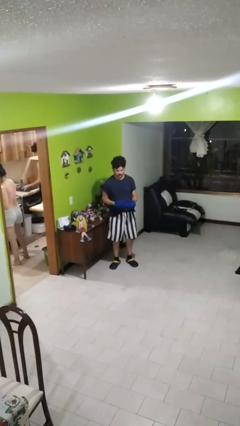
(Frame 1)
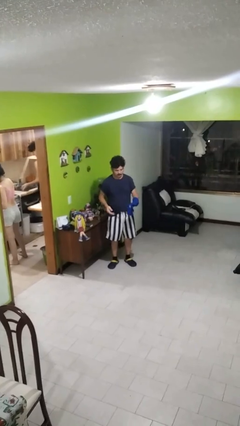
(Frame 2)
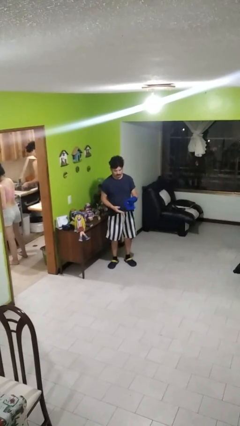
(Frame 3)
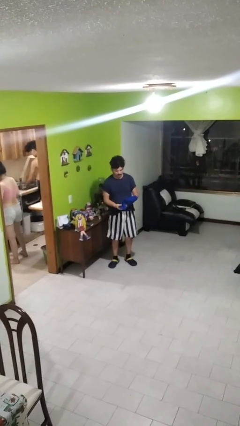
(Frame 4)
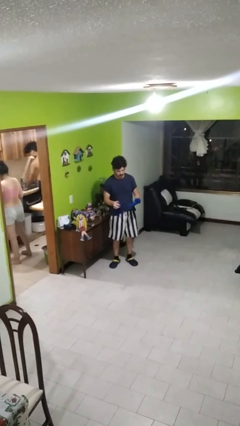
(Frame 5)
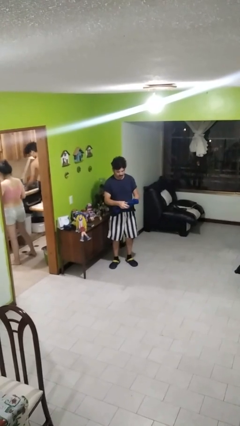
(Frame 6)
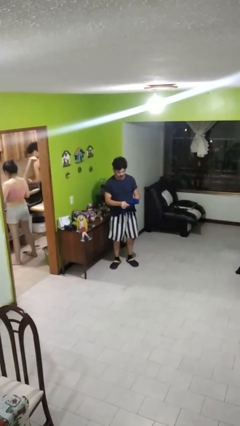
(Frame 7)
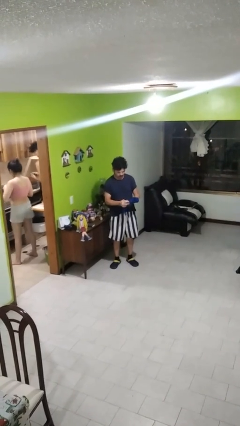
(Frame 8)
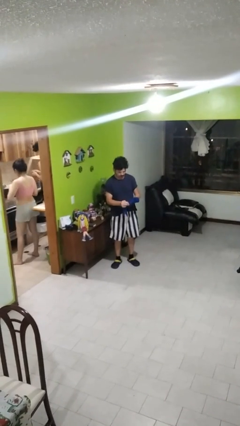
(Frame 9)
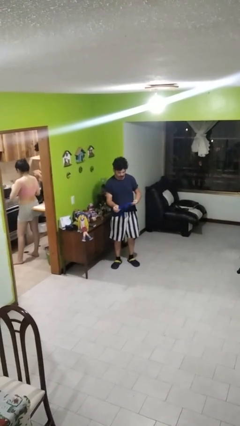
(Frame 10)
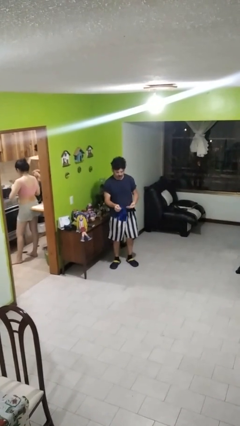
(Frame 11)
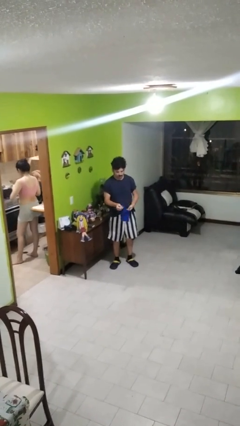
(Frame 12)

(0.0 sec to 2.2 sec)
person takes off gloves

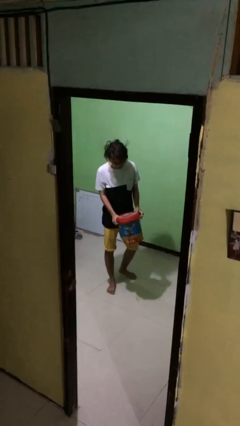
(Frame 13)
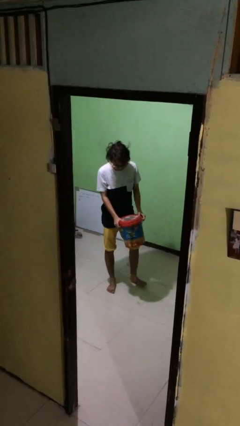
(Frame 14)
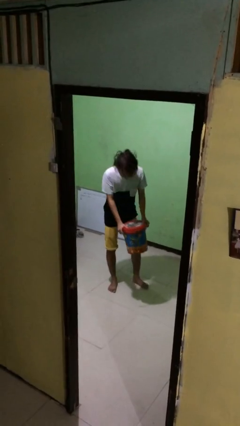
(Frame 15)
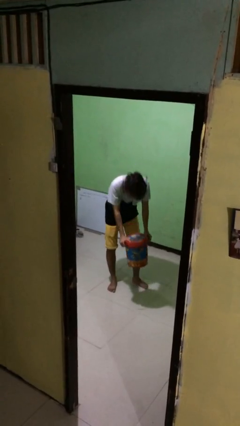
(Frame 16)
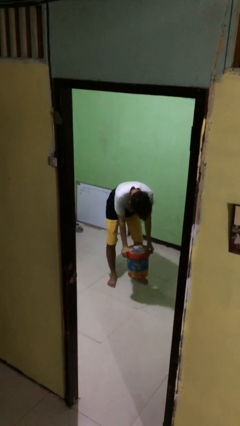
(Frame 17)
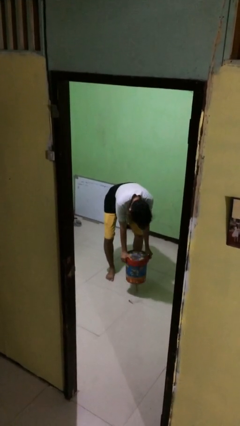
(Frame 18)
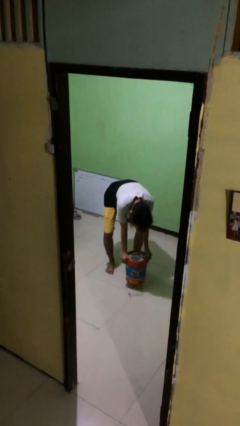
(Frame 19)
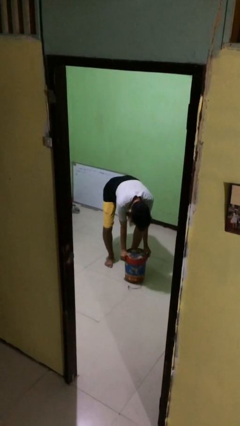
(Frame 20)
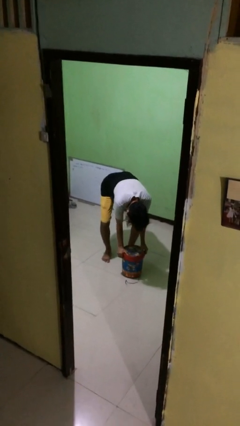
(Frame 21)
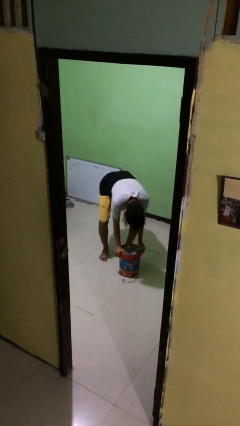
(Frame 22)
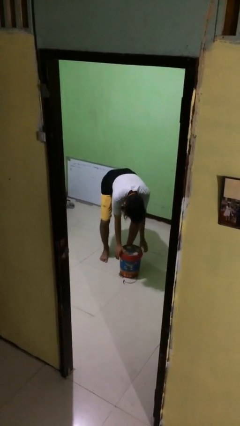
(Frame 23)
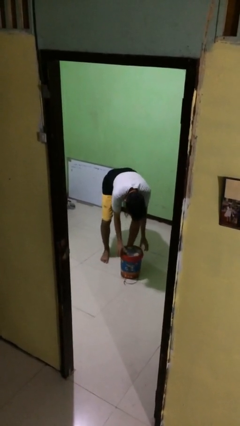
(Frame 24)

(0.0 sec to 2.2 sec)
person puts down object on floor

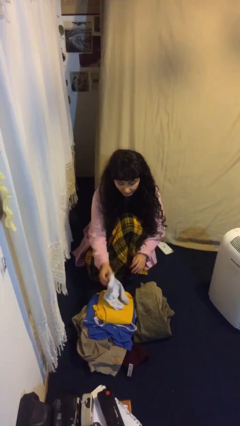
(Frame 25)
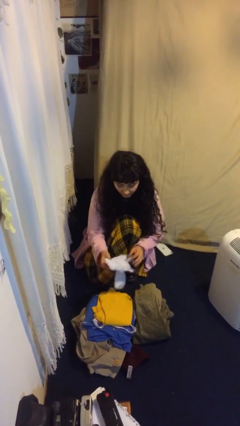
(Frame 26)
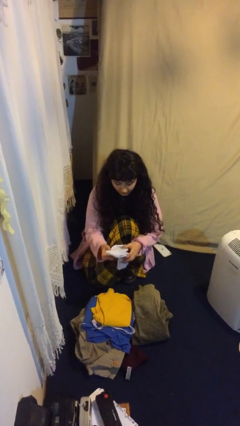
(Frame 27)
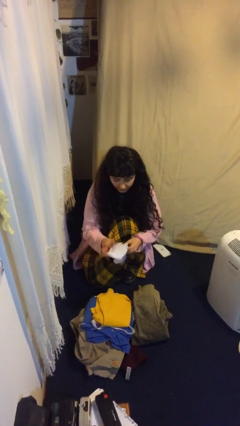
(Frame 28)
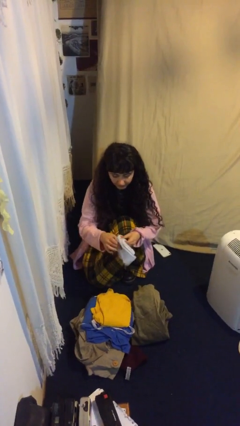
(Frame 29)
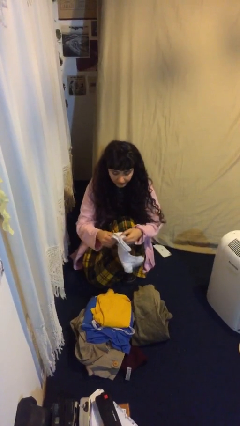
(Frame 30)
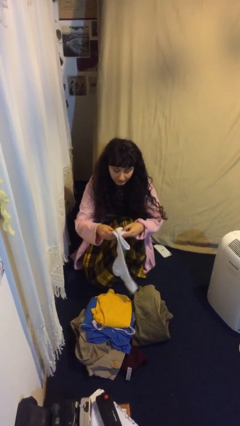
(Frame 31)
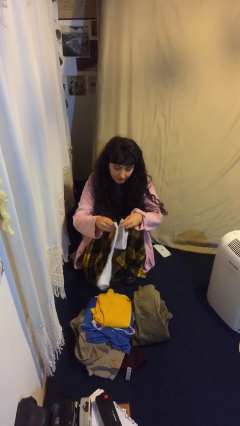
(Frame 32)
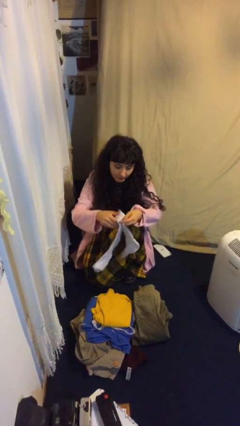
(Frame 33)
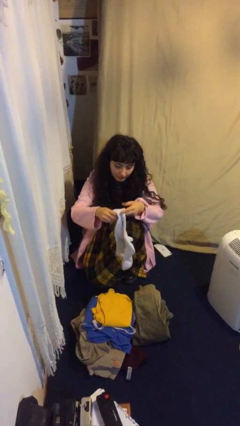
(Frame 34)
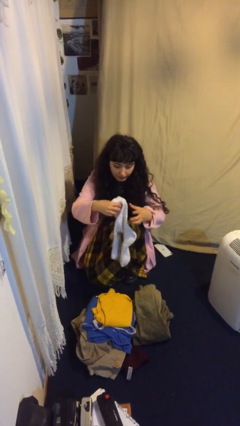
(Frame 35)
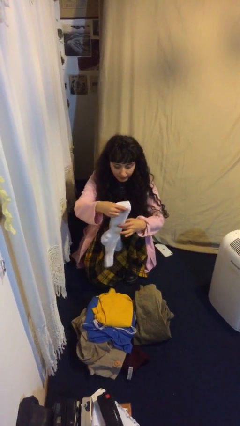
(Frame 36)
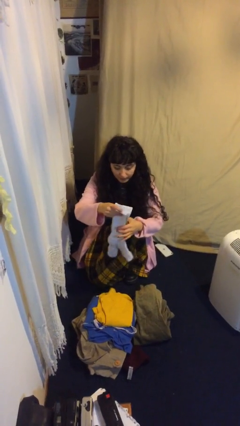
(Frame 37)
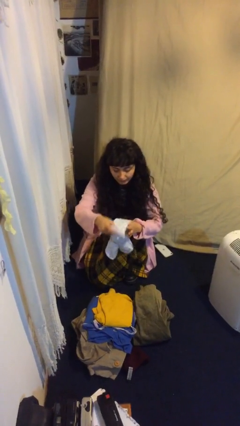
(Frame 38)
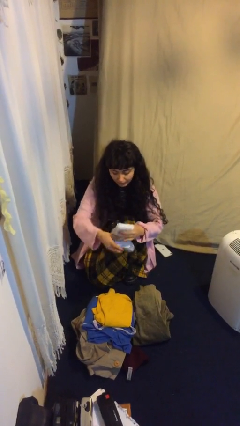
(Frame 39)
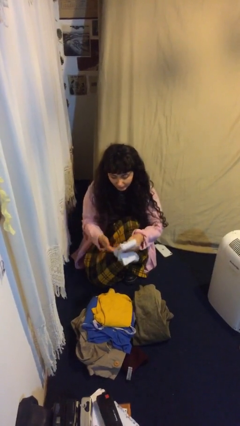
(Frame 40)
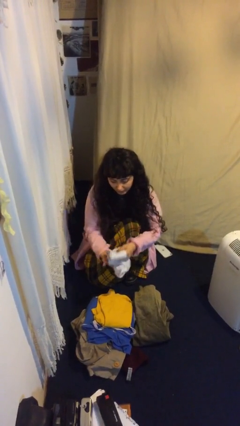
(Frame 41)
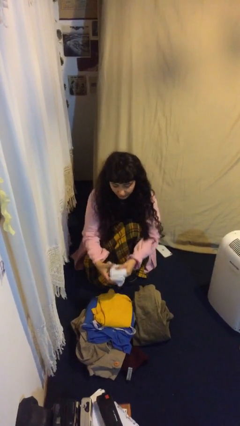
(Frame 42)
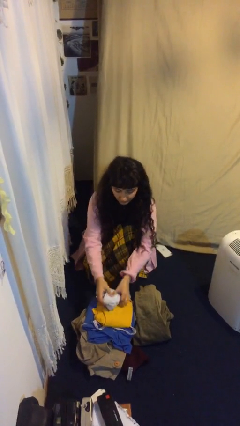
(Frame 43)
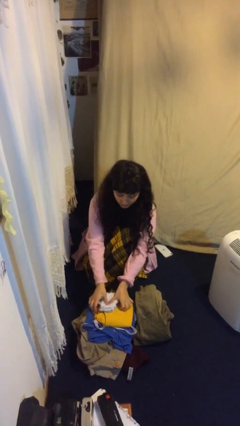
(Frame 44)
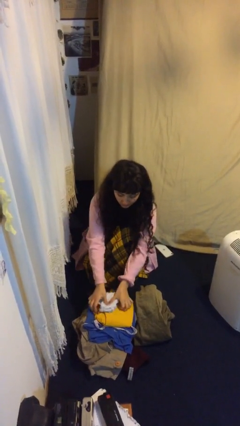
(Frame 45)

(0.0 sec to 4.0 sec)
person folds socks

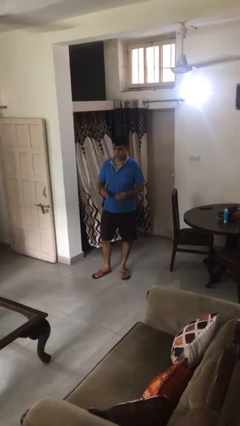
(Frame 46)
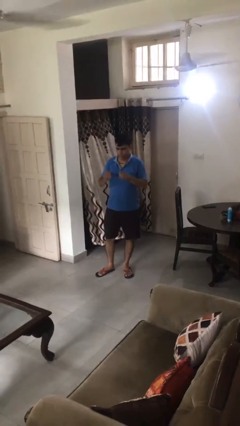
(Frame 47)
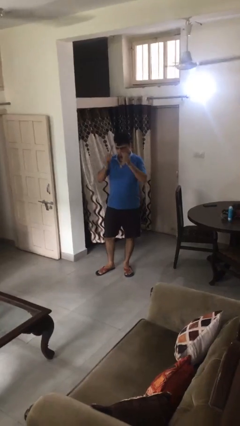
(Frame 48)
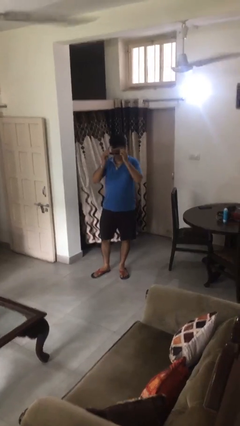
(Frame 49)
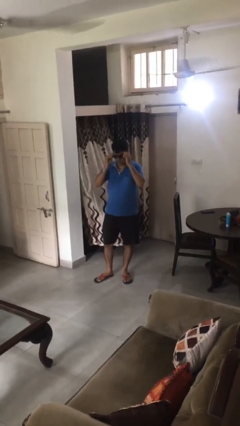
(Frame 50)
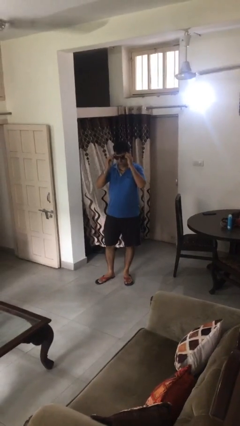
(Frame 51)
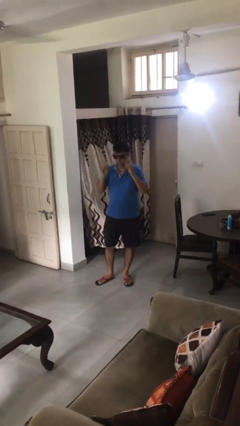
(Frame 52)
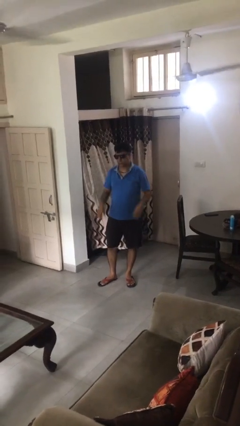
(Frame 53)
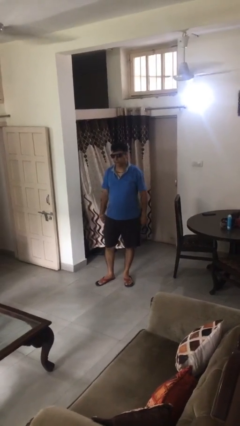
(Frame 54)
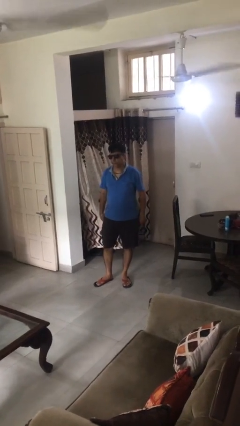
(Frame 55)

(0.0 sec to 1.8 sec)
person puts on sunglasses

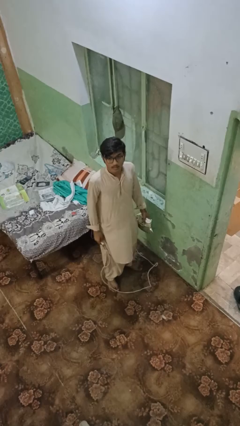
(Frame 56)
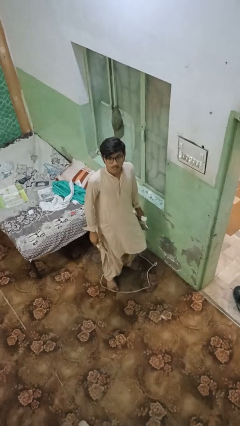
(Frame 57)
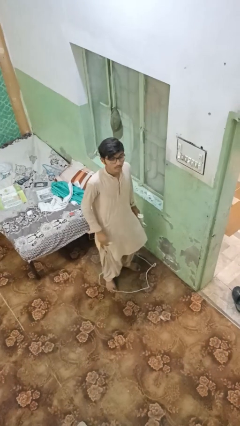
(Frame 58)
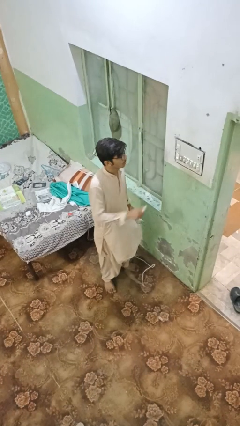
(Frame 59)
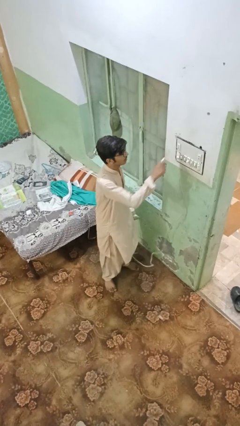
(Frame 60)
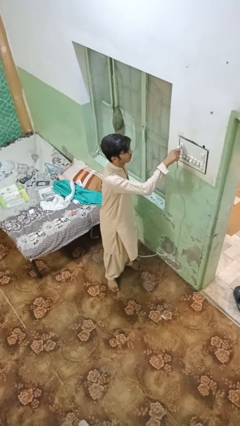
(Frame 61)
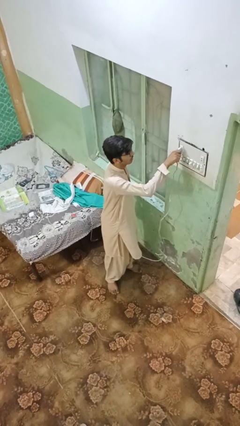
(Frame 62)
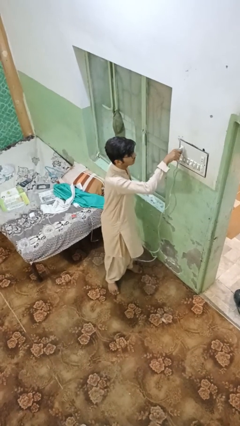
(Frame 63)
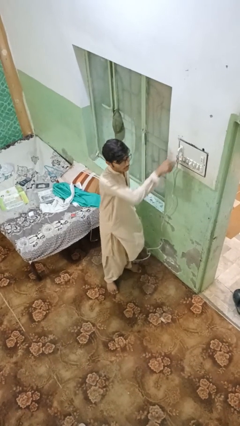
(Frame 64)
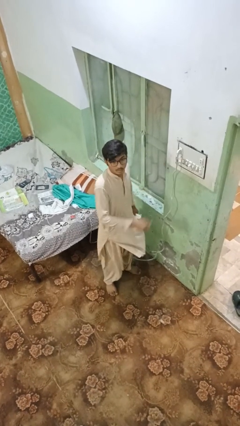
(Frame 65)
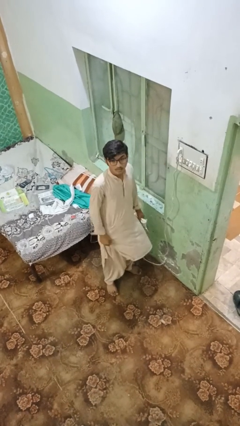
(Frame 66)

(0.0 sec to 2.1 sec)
person plugs into electrical socket

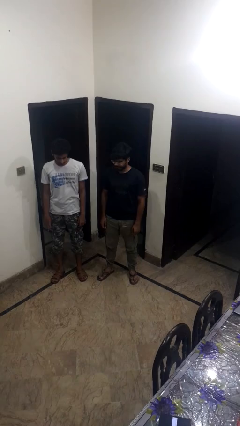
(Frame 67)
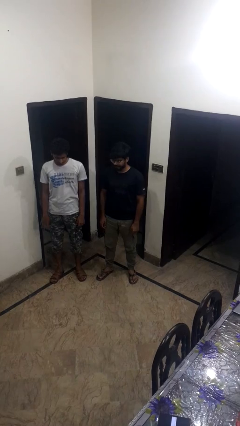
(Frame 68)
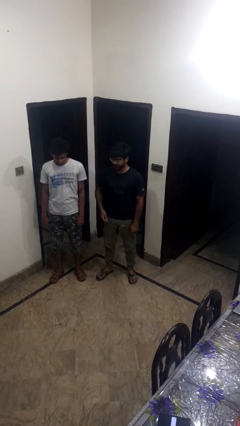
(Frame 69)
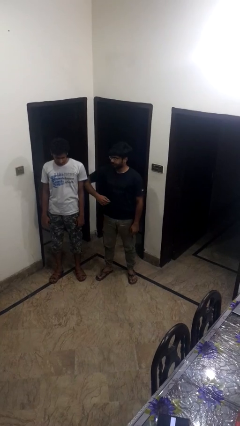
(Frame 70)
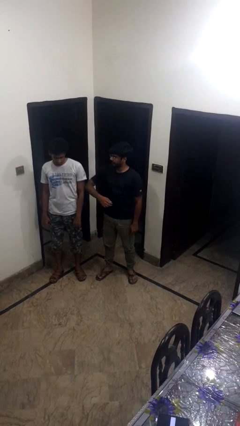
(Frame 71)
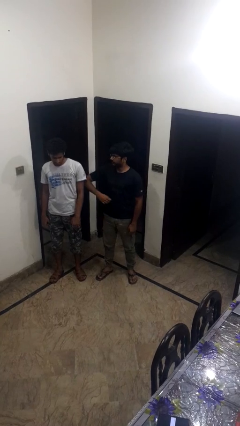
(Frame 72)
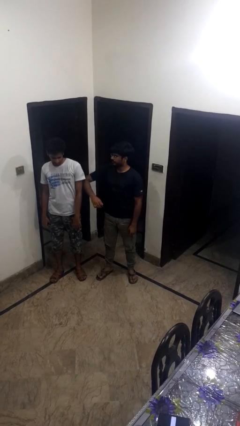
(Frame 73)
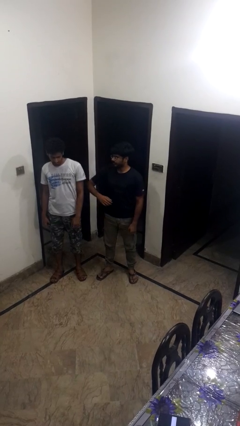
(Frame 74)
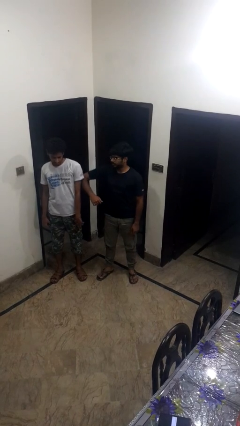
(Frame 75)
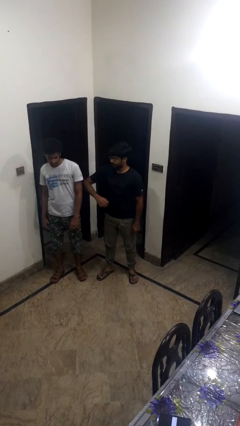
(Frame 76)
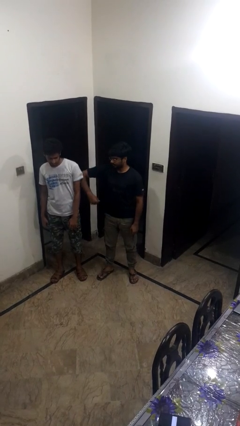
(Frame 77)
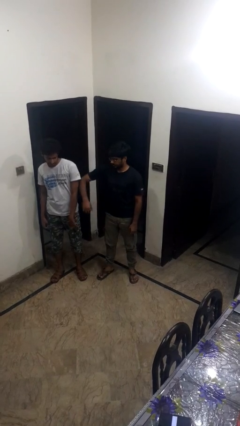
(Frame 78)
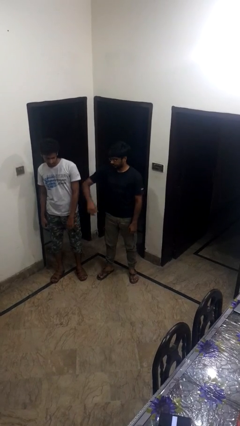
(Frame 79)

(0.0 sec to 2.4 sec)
person nudges person with elbow

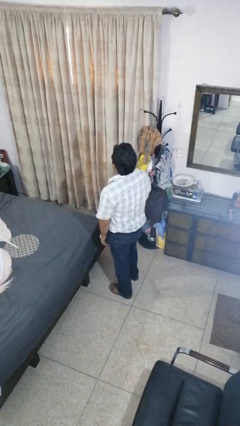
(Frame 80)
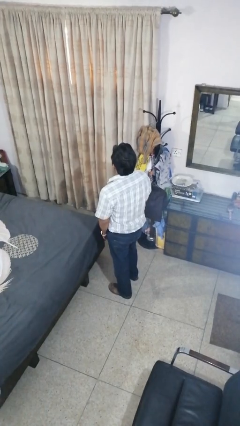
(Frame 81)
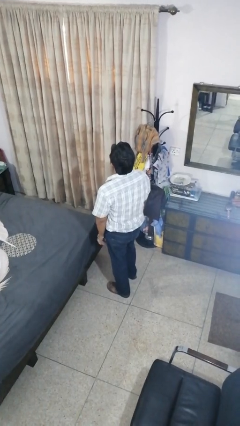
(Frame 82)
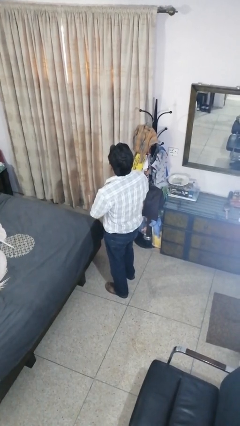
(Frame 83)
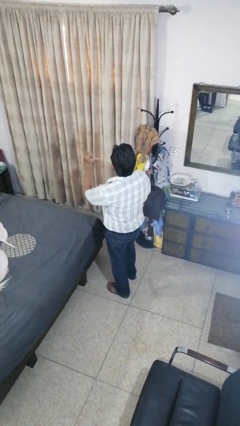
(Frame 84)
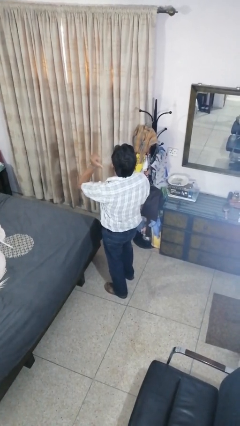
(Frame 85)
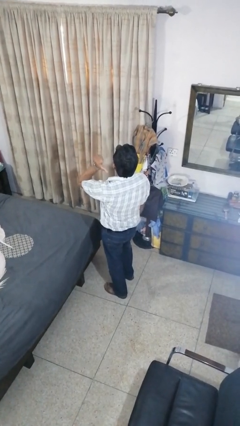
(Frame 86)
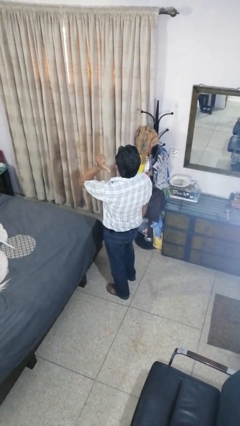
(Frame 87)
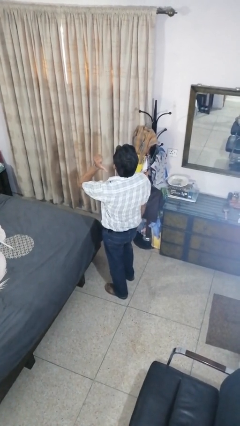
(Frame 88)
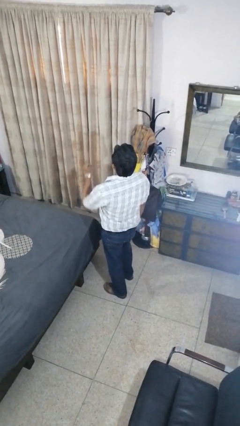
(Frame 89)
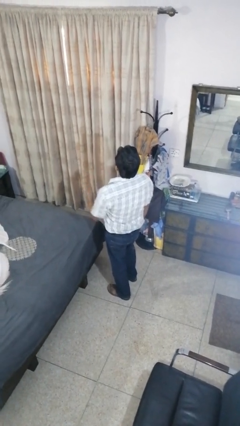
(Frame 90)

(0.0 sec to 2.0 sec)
person gestures behind me

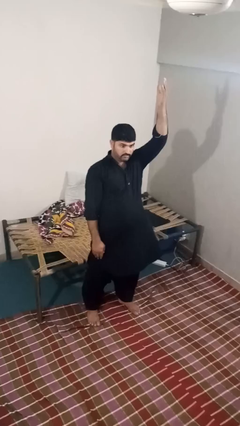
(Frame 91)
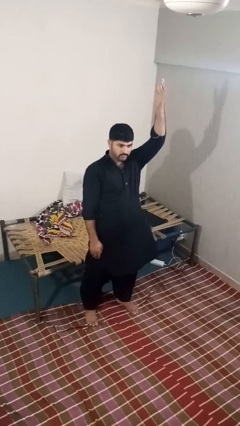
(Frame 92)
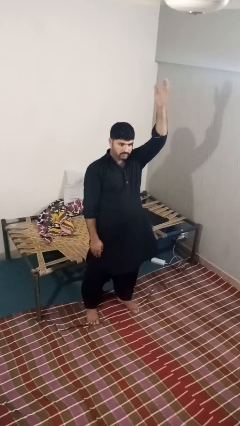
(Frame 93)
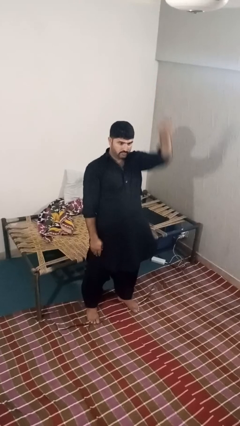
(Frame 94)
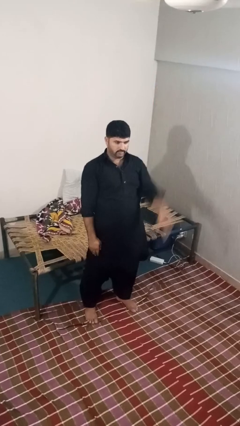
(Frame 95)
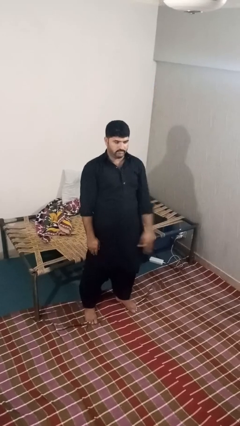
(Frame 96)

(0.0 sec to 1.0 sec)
person gestures swipe down
